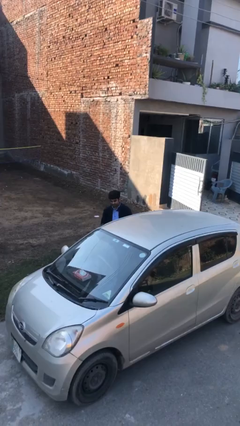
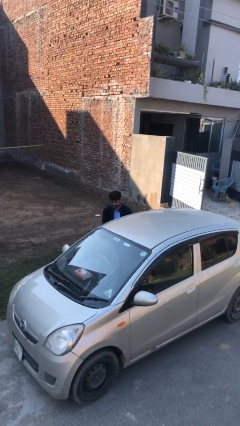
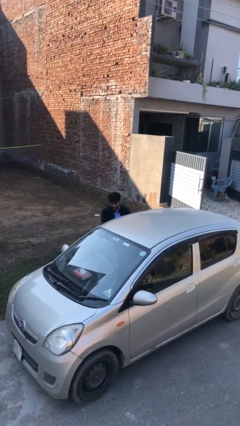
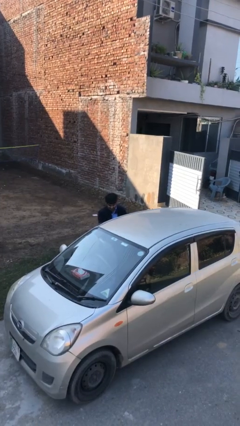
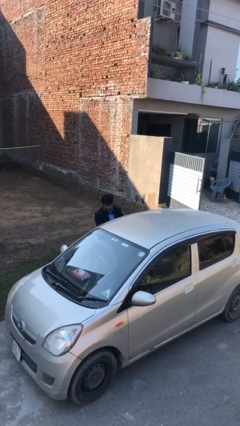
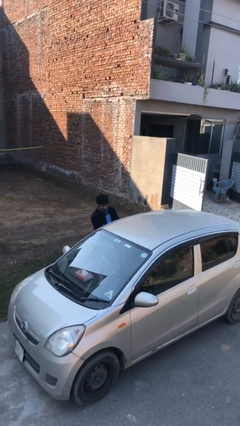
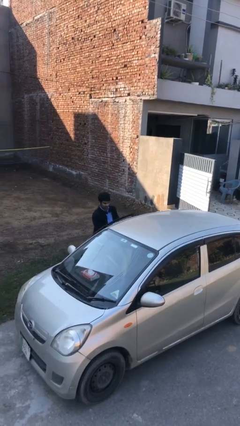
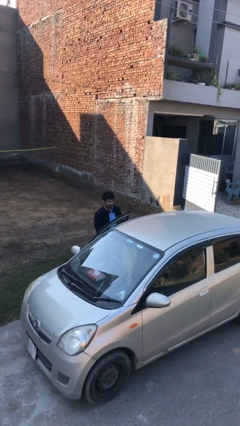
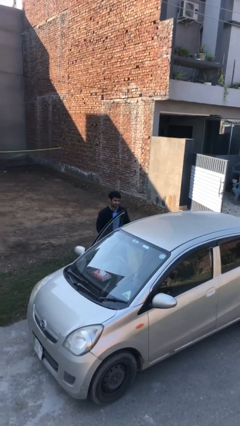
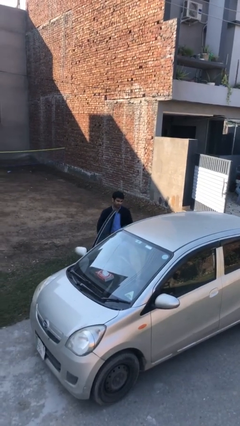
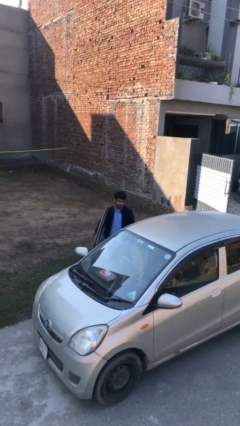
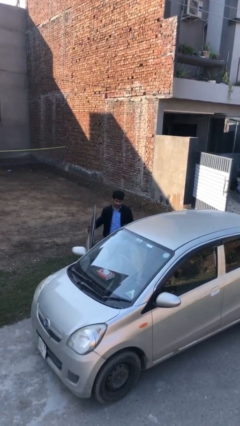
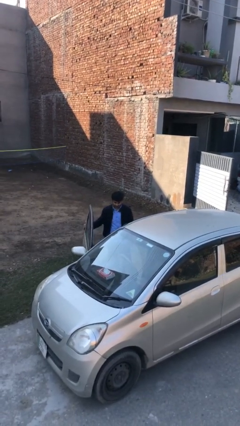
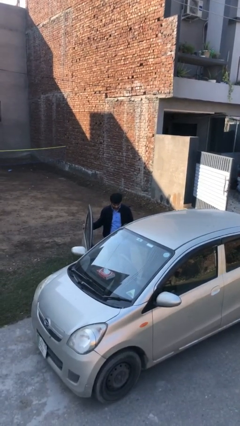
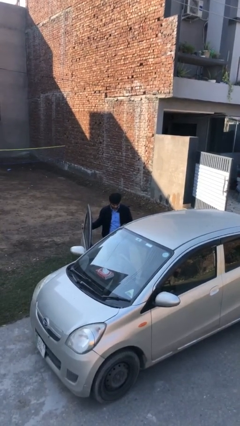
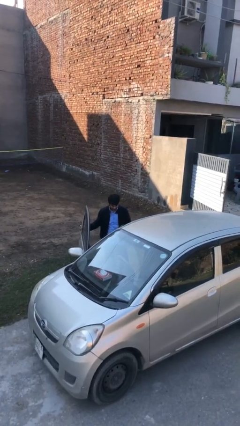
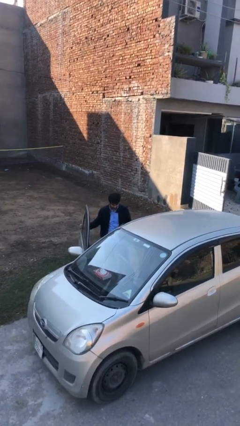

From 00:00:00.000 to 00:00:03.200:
person opens car door

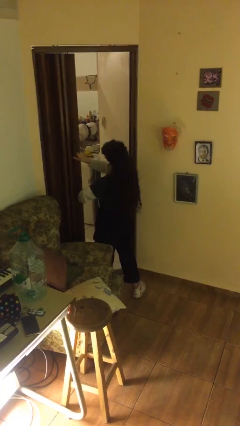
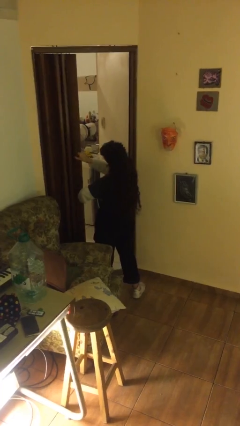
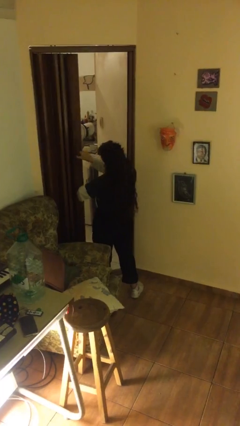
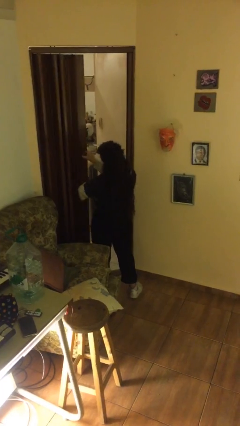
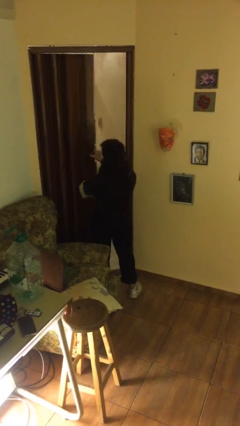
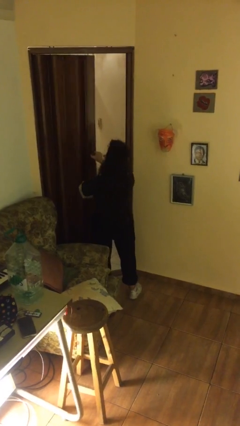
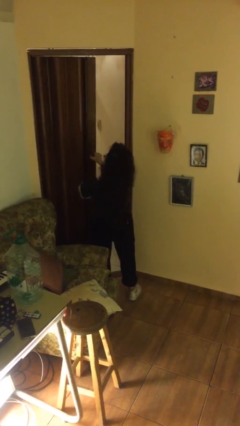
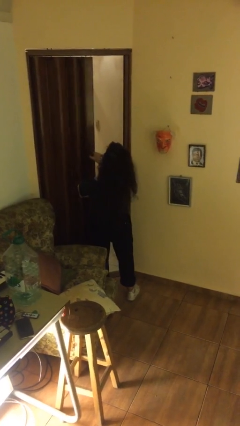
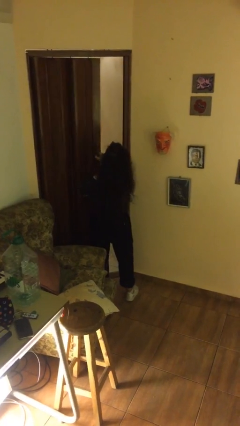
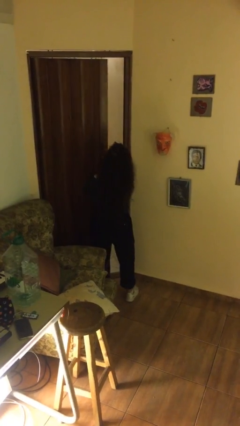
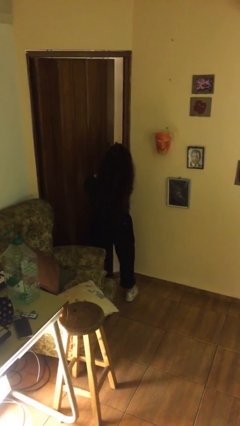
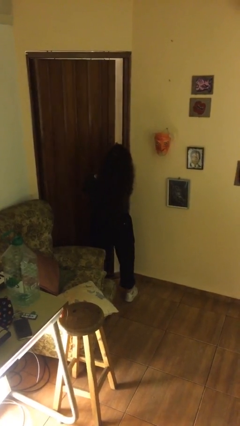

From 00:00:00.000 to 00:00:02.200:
person closes sliding door

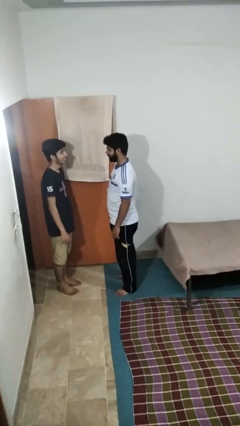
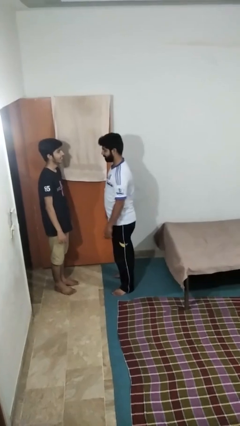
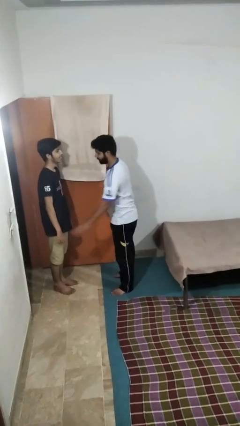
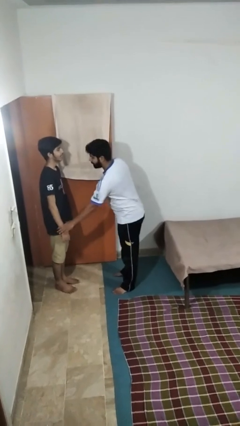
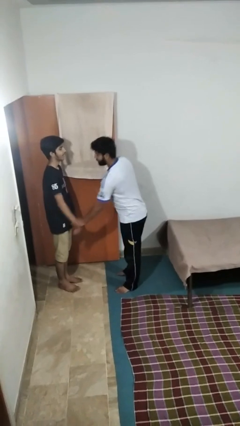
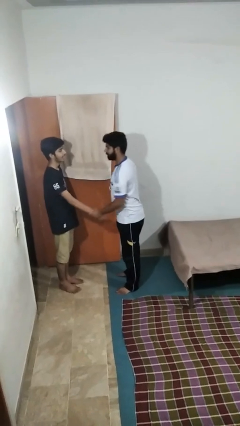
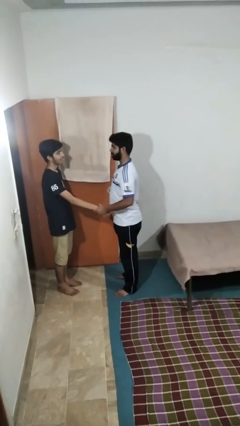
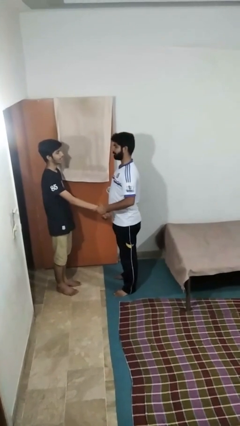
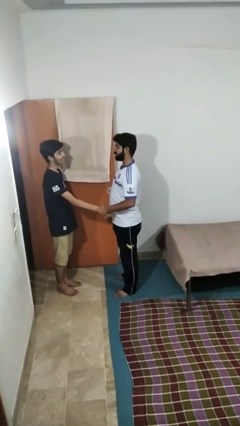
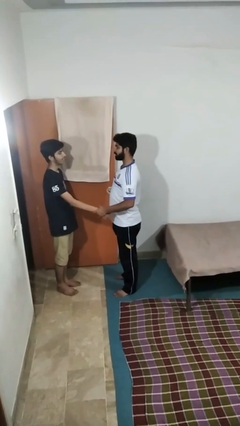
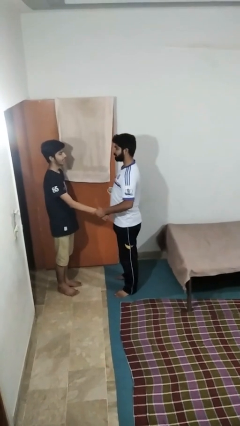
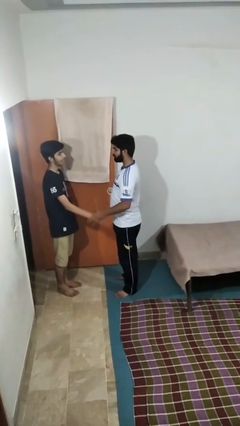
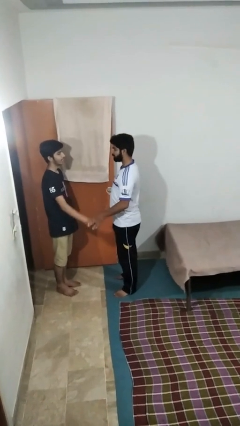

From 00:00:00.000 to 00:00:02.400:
person grabs person by forearm

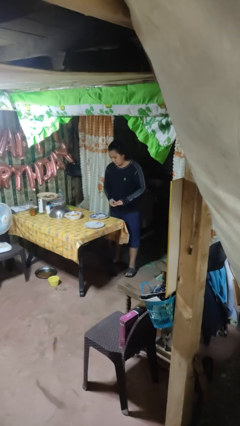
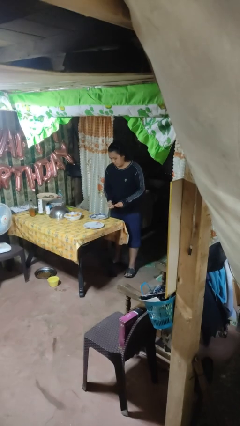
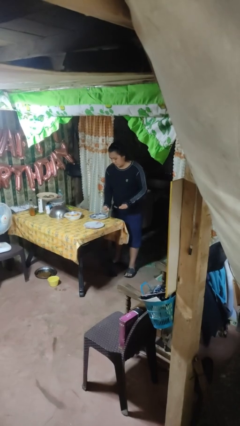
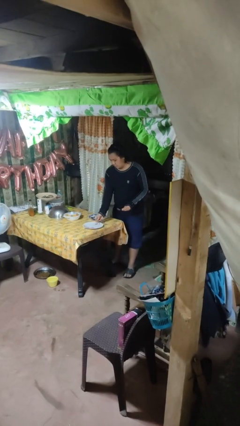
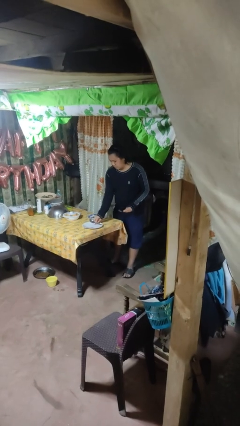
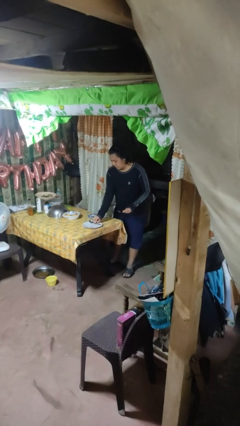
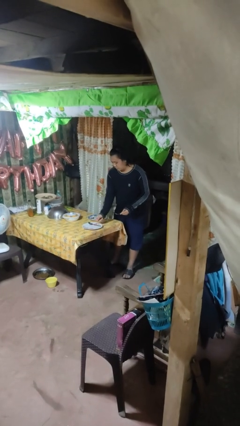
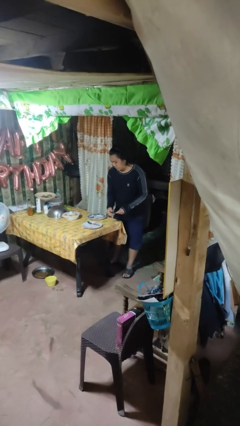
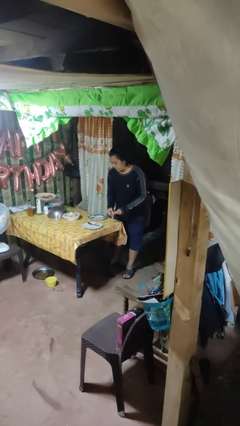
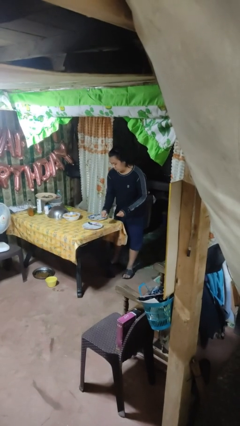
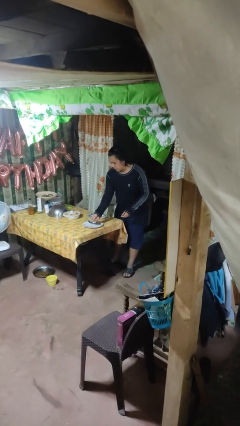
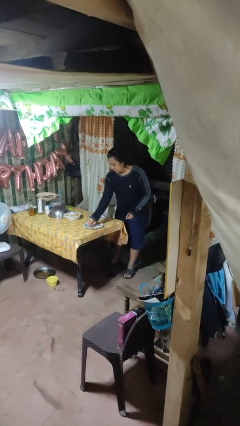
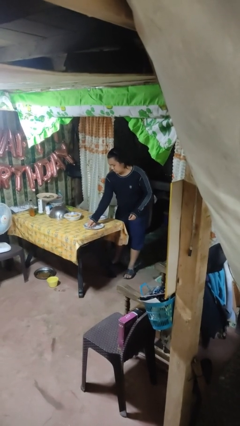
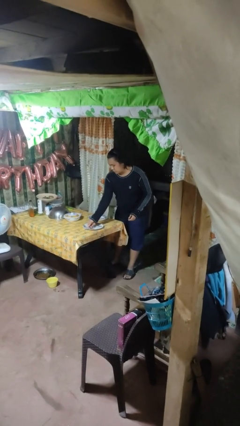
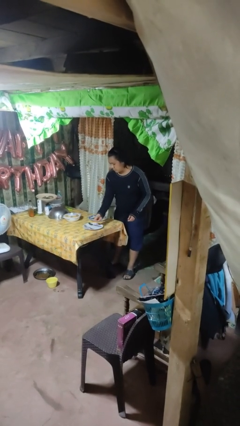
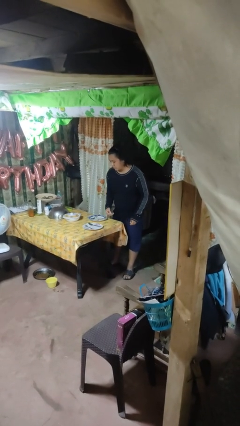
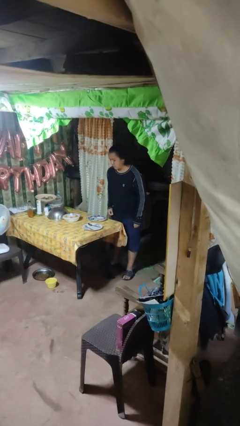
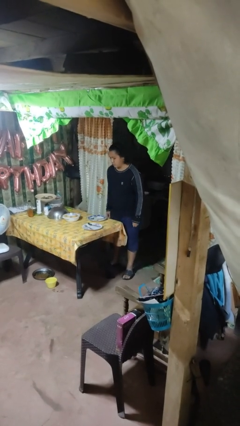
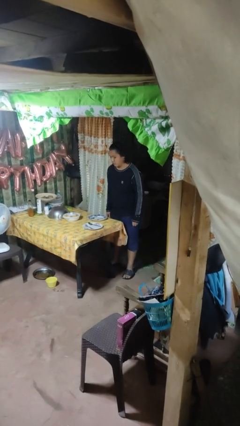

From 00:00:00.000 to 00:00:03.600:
person sets table

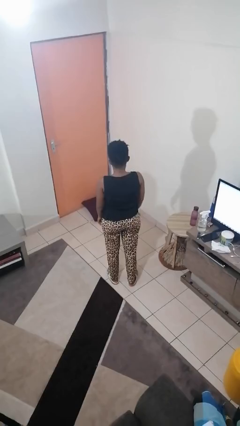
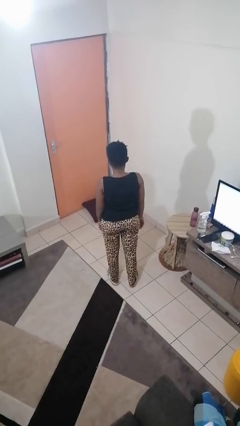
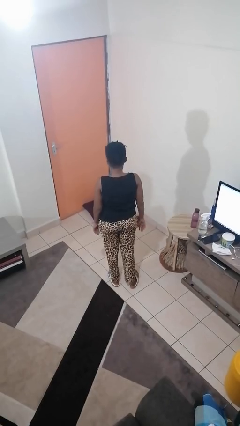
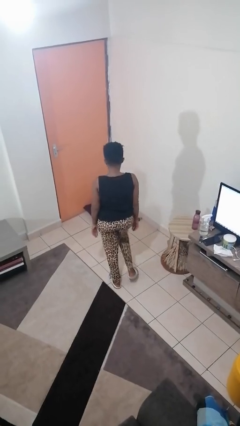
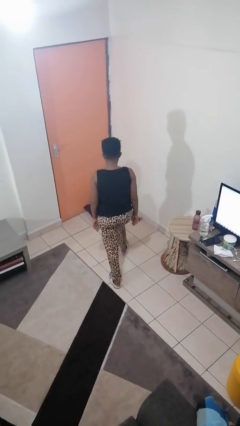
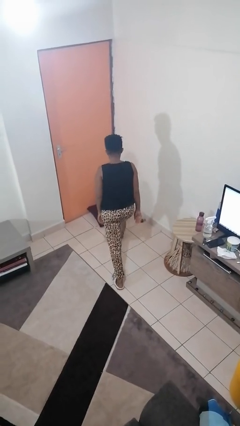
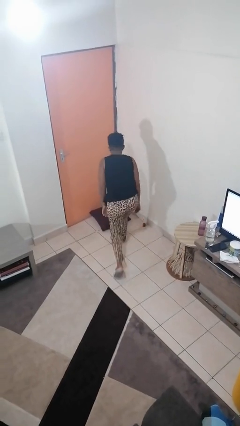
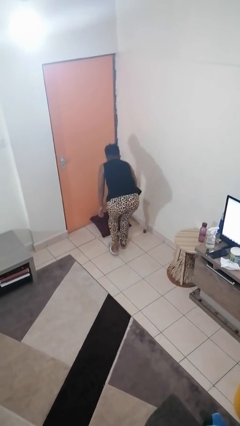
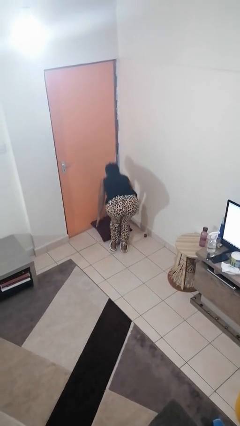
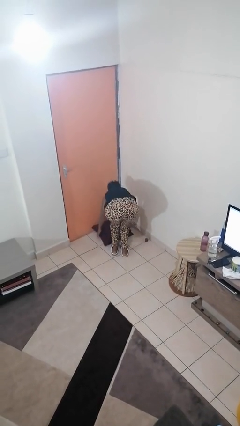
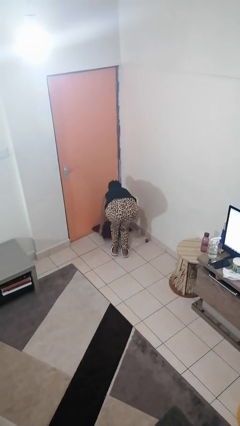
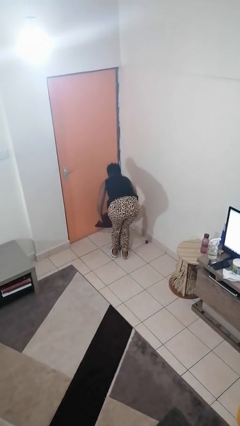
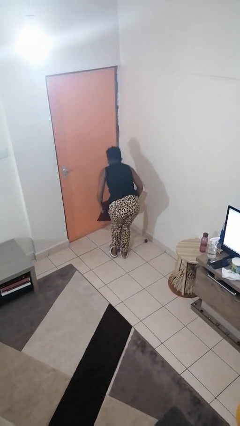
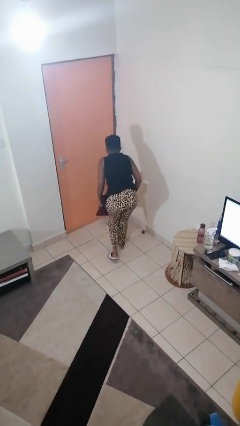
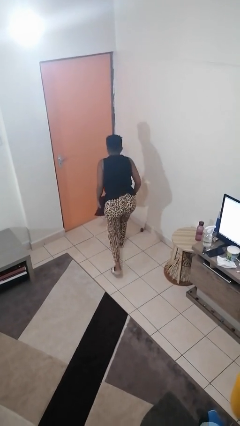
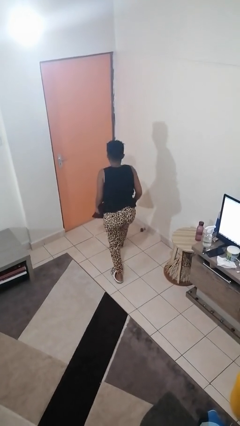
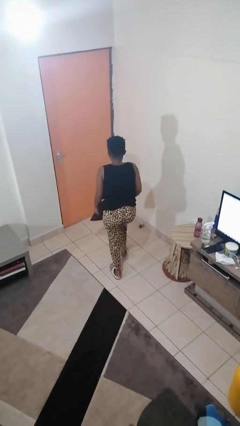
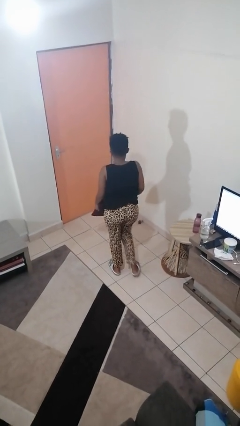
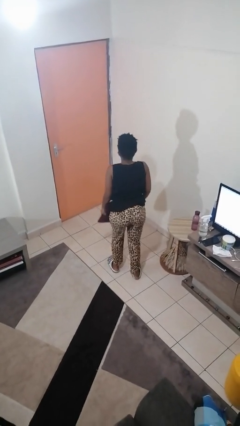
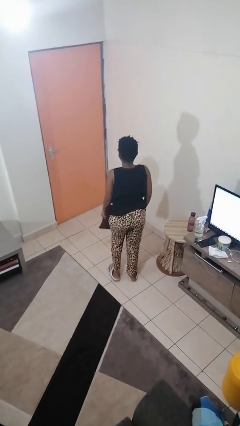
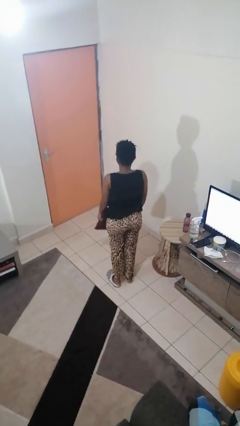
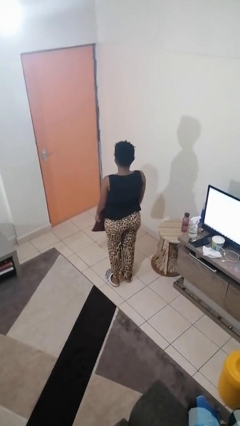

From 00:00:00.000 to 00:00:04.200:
person picks up object from floor

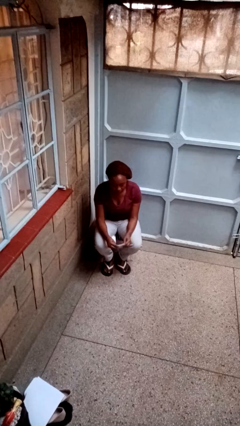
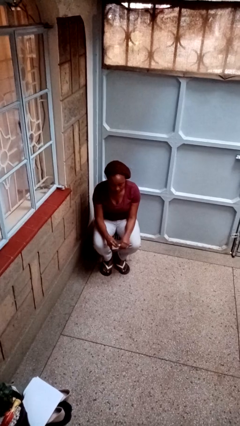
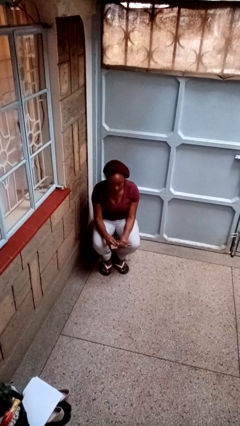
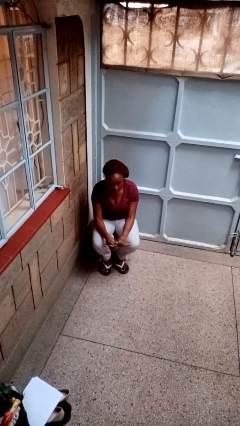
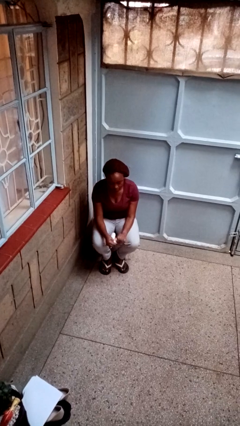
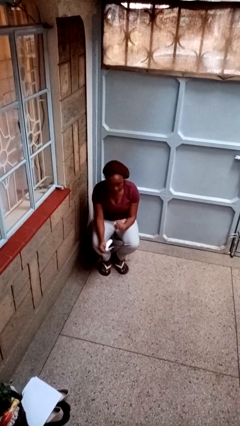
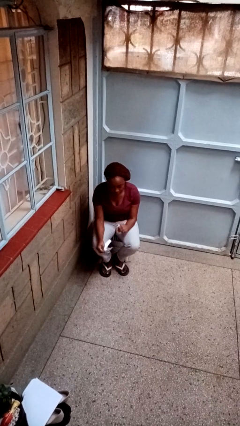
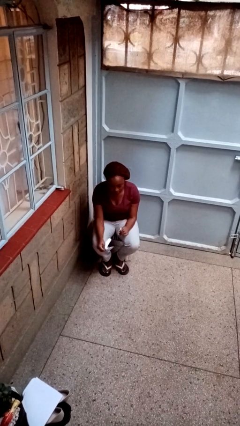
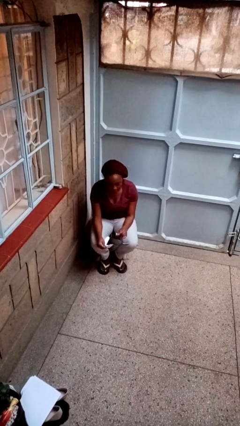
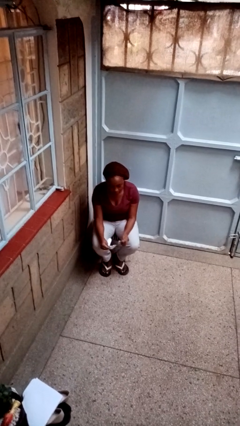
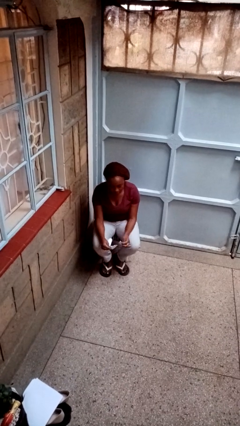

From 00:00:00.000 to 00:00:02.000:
person tears paper
